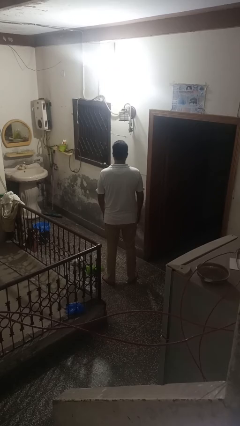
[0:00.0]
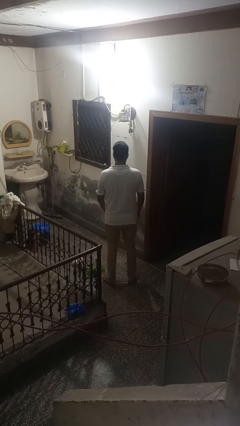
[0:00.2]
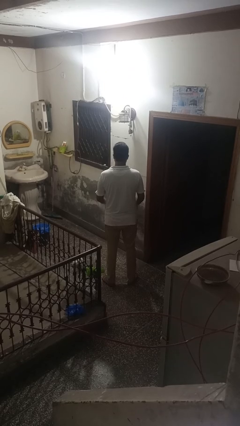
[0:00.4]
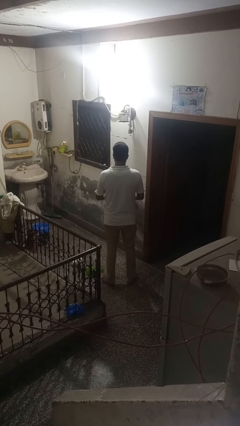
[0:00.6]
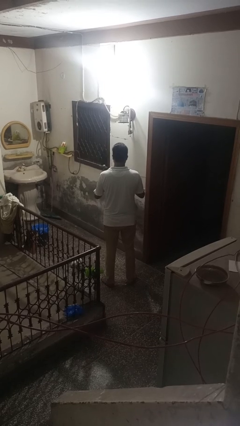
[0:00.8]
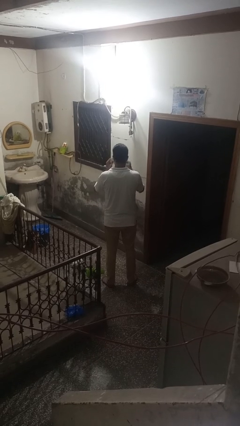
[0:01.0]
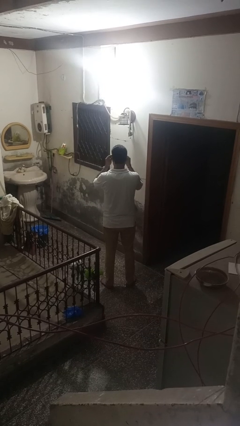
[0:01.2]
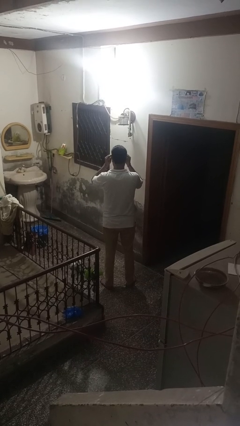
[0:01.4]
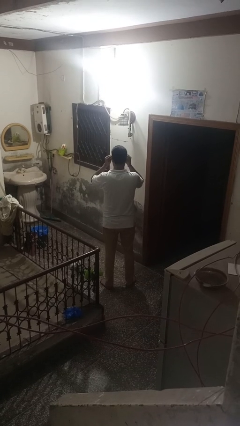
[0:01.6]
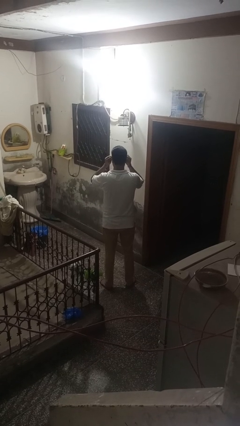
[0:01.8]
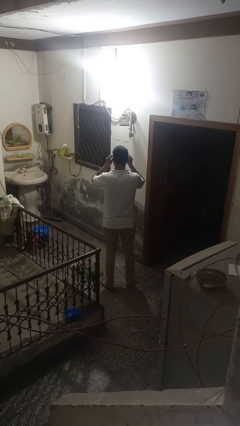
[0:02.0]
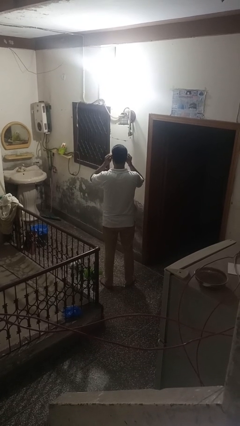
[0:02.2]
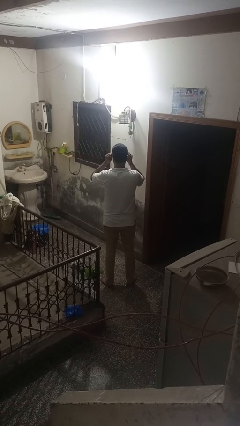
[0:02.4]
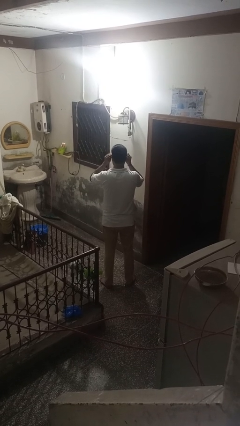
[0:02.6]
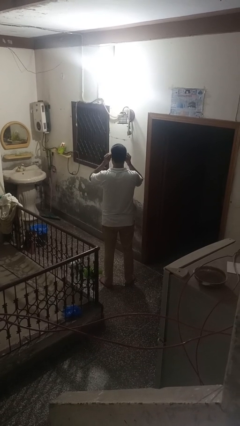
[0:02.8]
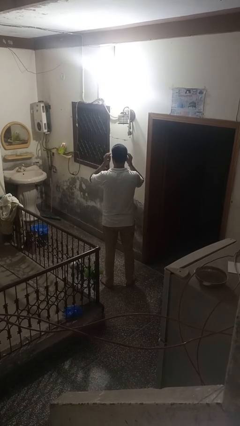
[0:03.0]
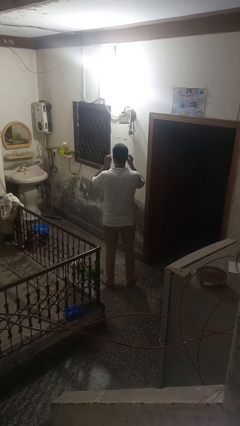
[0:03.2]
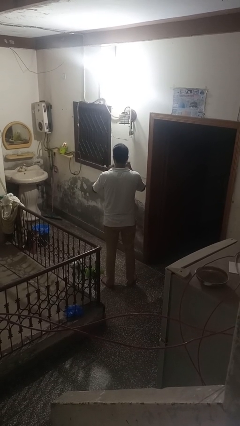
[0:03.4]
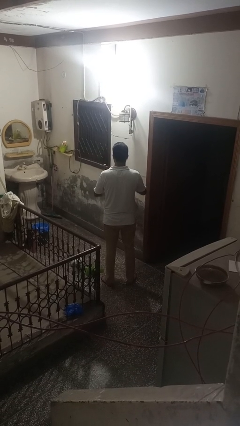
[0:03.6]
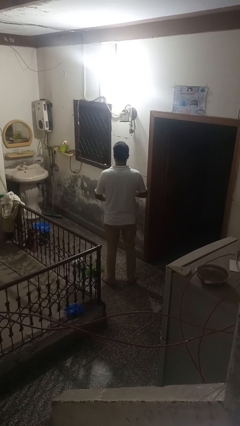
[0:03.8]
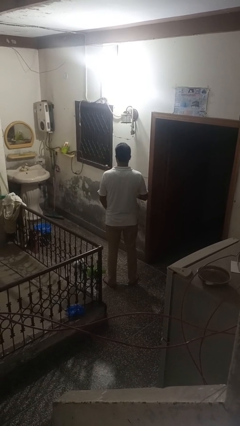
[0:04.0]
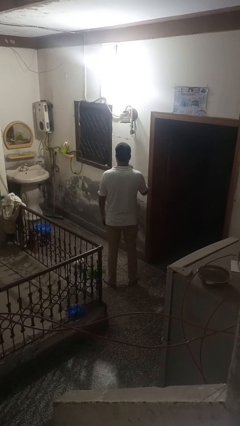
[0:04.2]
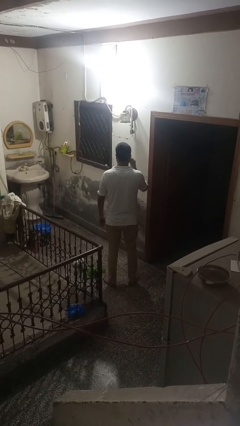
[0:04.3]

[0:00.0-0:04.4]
person puts on sunglasses

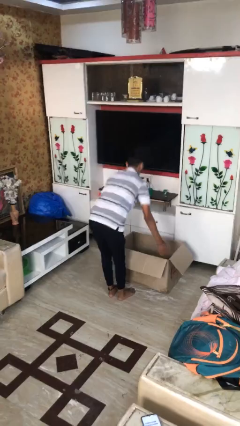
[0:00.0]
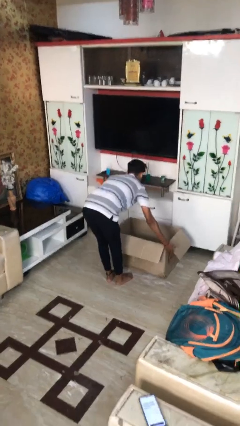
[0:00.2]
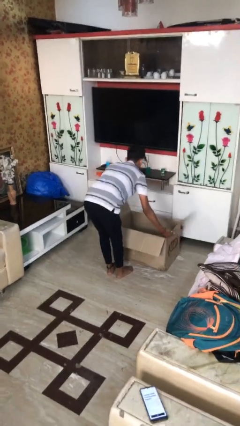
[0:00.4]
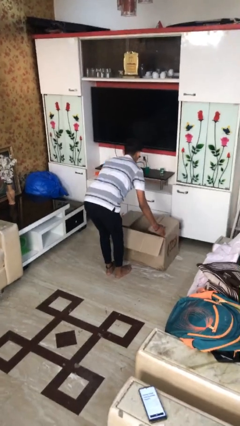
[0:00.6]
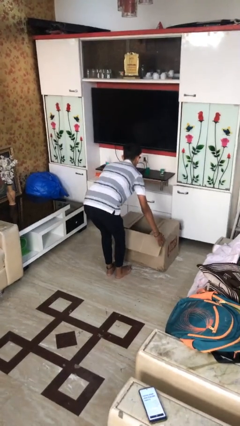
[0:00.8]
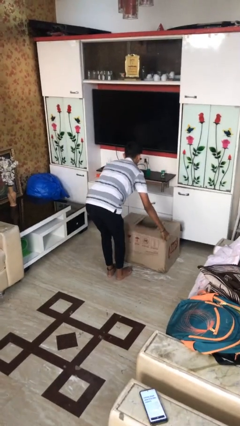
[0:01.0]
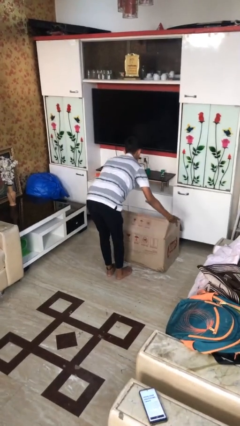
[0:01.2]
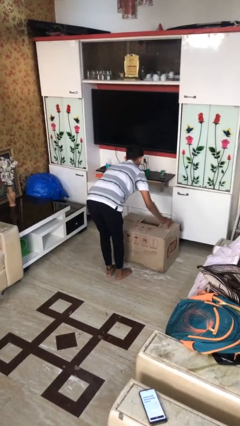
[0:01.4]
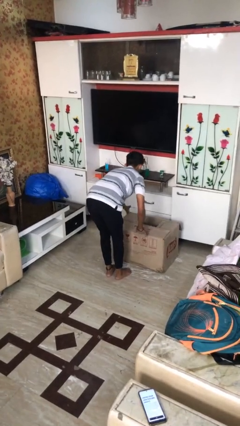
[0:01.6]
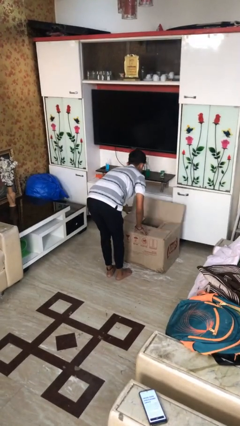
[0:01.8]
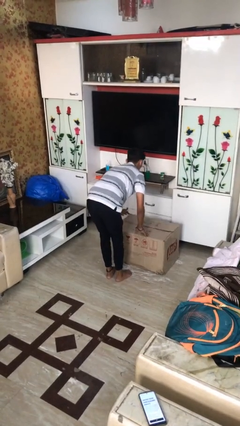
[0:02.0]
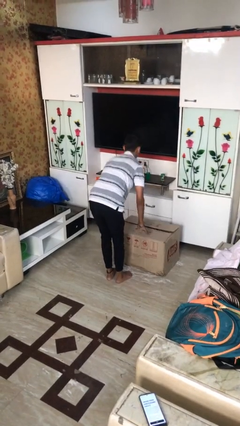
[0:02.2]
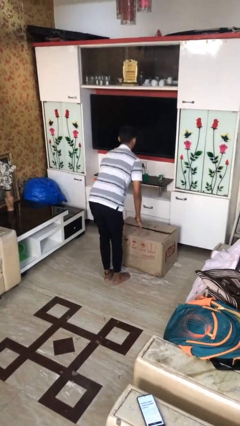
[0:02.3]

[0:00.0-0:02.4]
person closes box

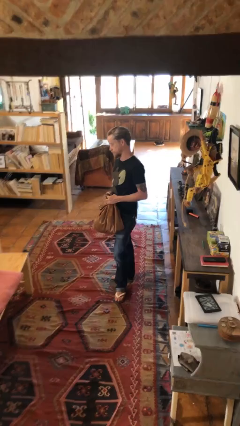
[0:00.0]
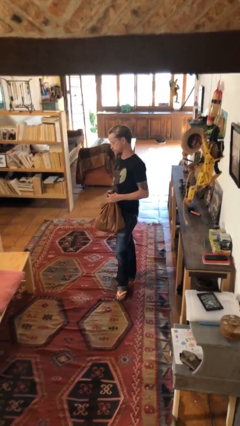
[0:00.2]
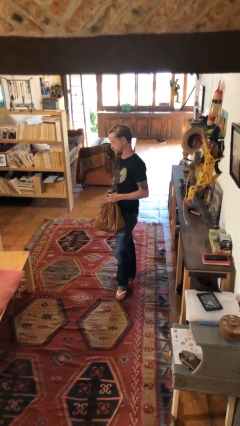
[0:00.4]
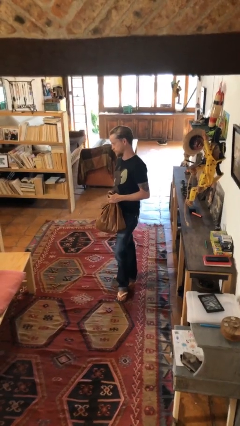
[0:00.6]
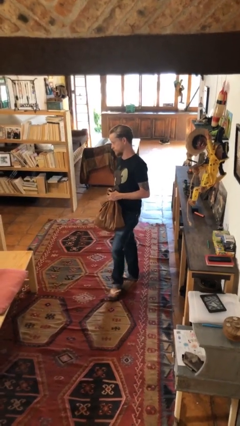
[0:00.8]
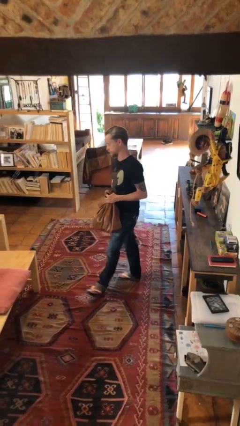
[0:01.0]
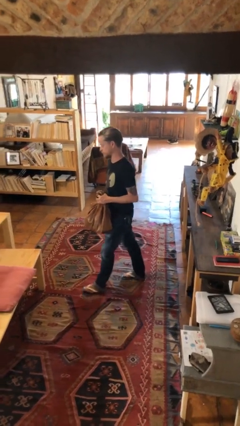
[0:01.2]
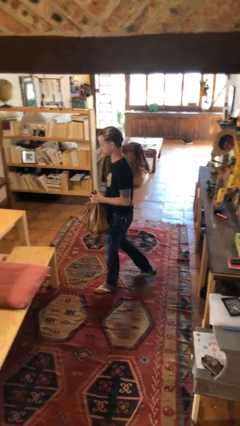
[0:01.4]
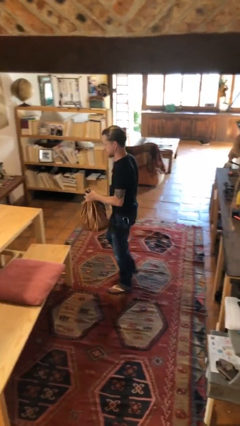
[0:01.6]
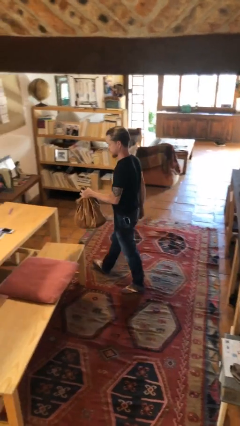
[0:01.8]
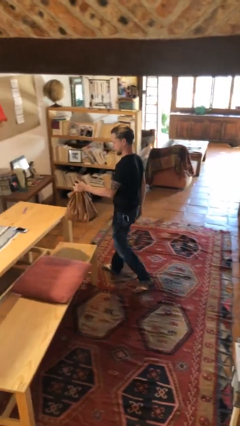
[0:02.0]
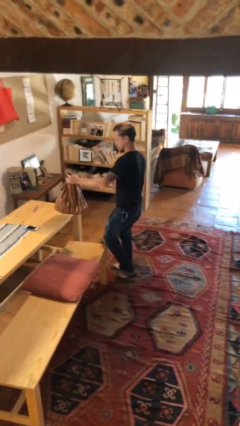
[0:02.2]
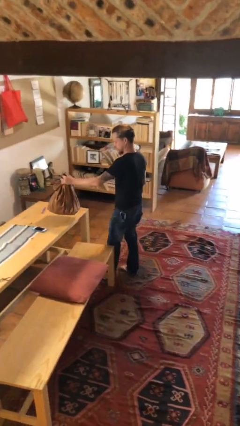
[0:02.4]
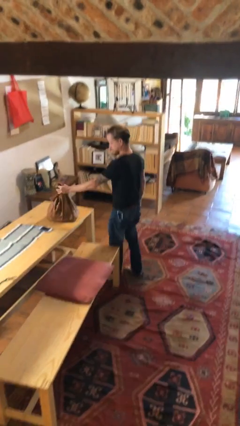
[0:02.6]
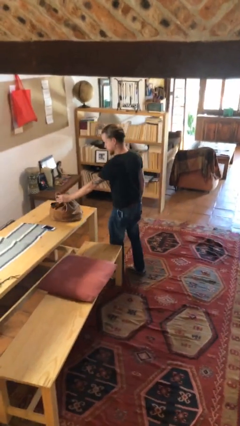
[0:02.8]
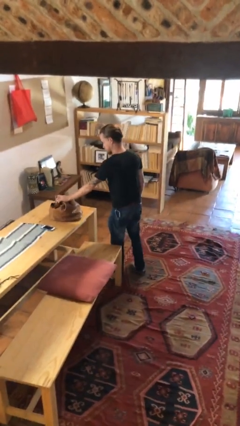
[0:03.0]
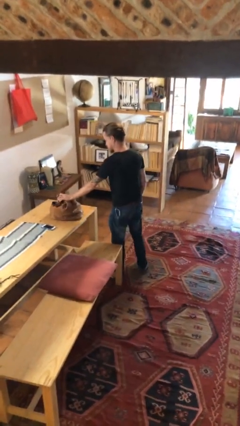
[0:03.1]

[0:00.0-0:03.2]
person puts down object on table

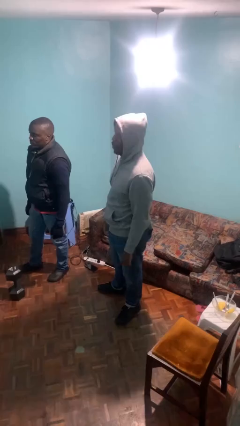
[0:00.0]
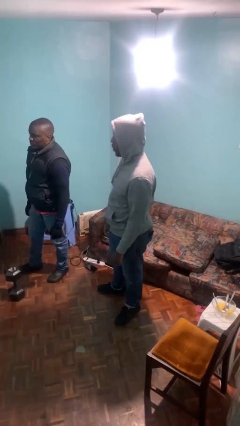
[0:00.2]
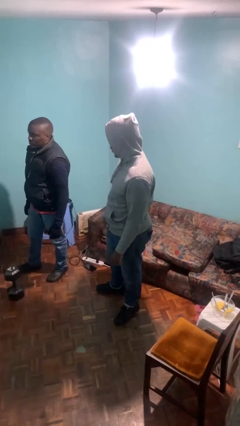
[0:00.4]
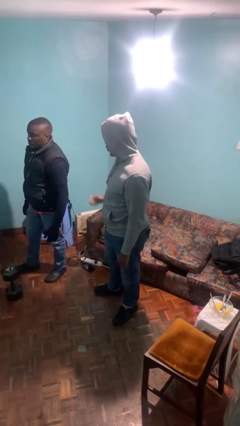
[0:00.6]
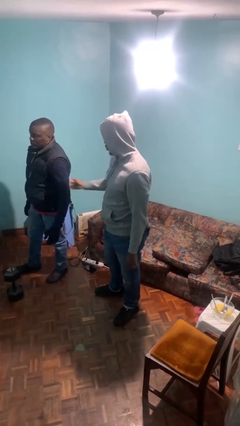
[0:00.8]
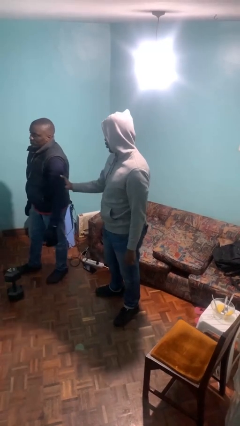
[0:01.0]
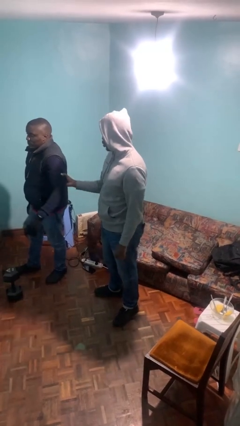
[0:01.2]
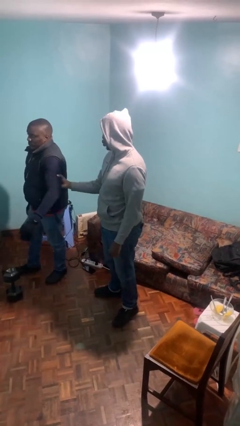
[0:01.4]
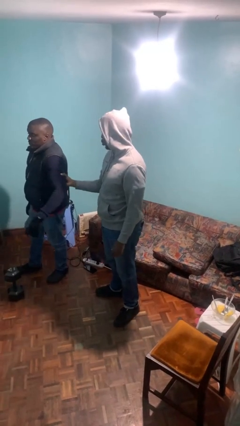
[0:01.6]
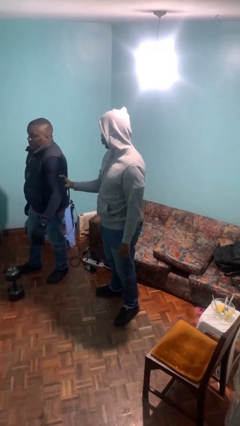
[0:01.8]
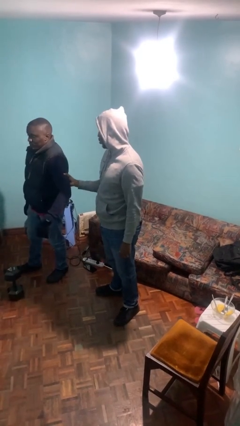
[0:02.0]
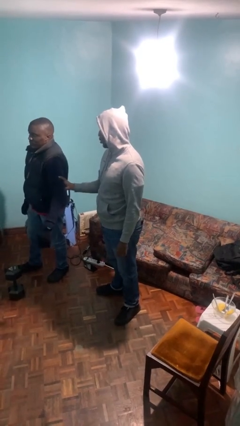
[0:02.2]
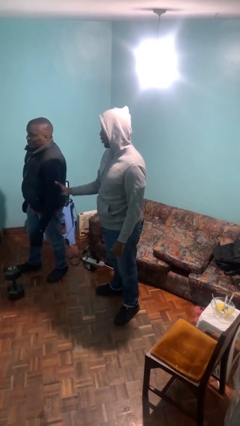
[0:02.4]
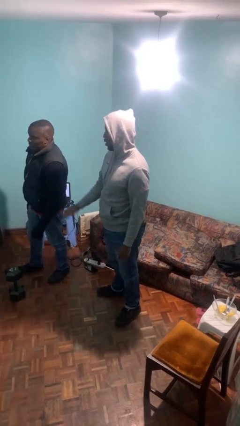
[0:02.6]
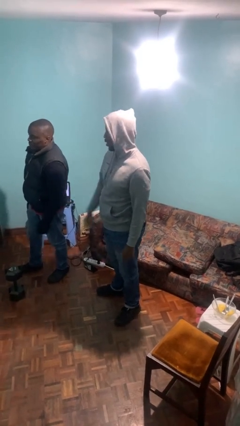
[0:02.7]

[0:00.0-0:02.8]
person grabs person by bicep

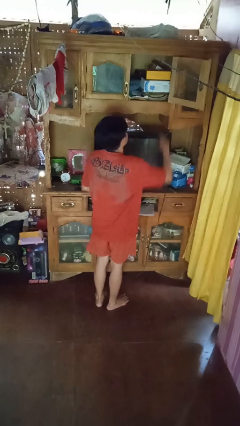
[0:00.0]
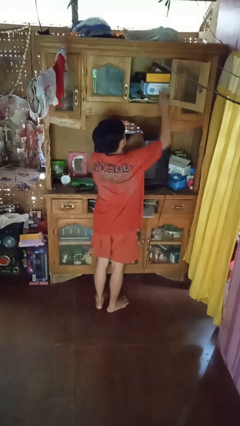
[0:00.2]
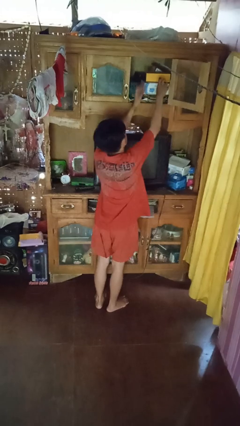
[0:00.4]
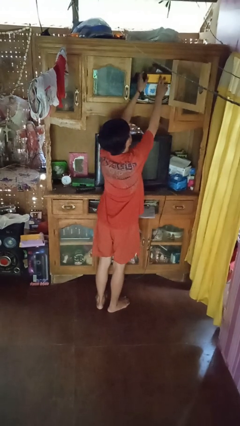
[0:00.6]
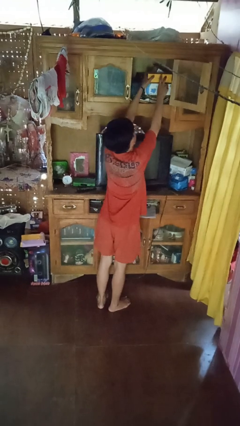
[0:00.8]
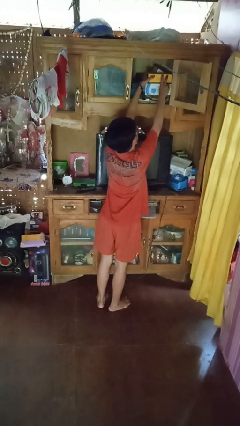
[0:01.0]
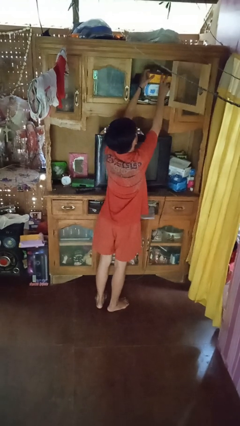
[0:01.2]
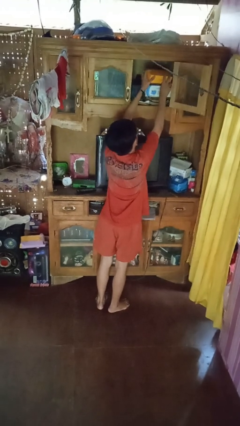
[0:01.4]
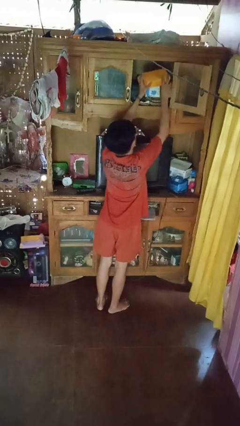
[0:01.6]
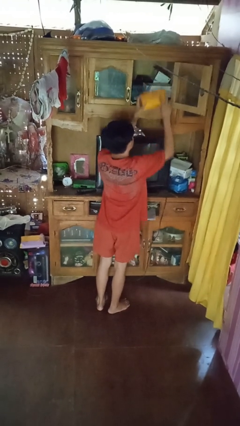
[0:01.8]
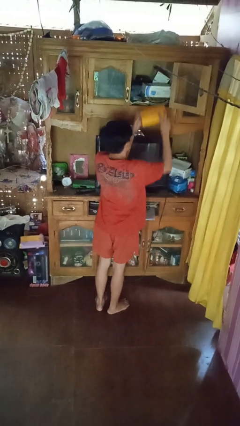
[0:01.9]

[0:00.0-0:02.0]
person picks up object from shelf

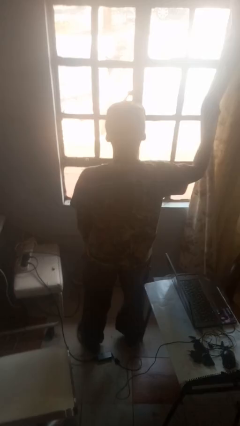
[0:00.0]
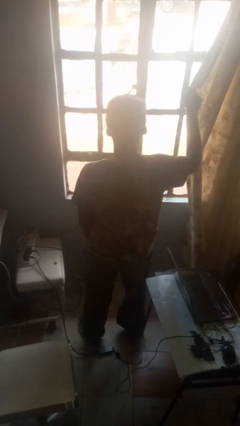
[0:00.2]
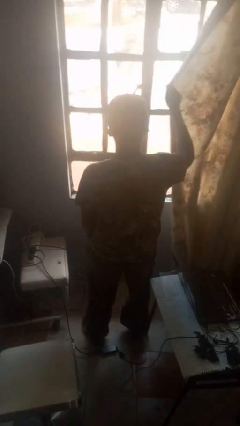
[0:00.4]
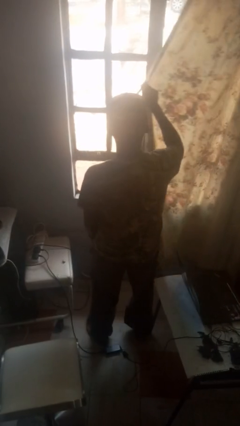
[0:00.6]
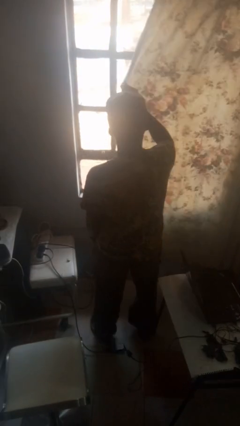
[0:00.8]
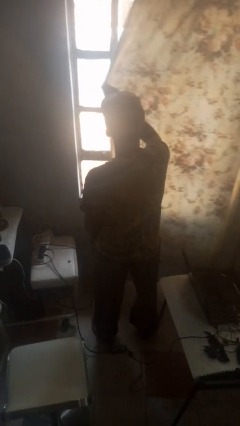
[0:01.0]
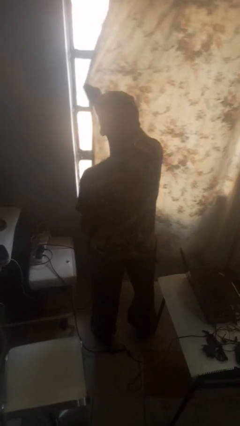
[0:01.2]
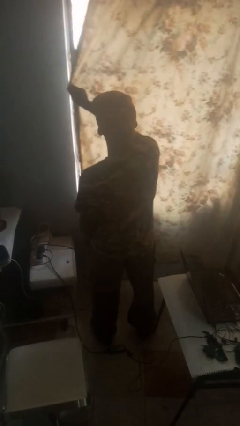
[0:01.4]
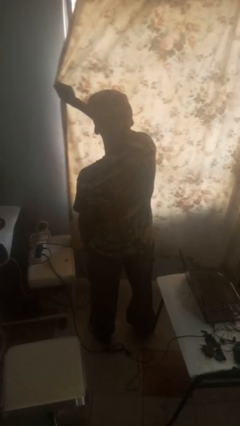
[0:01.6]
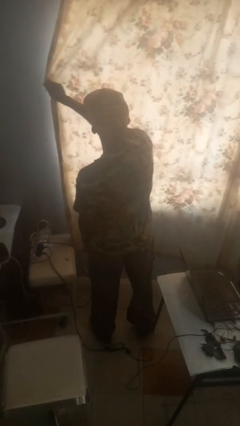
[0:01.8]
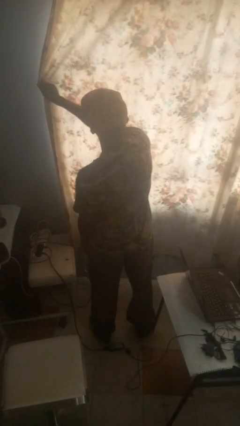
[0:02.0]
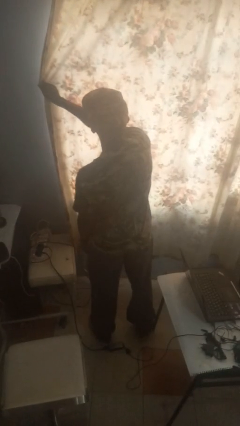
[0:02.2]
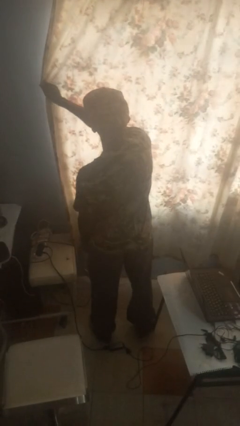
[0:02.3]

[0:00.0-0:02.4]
person closes curtains

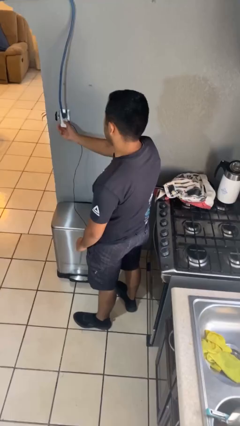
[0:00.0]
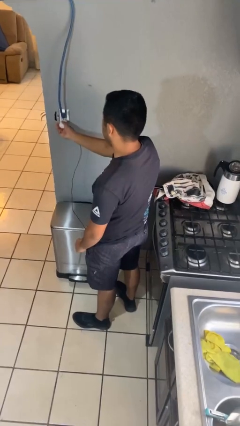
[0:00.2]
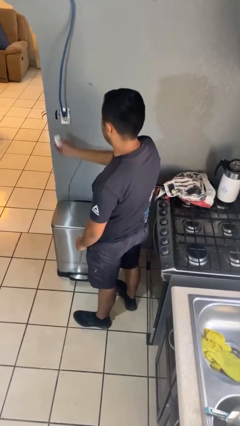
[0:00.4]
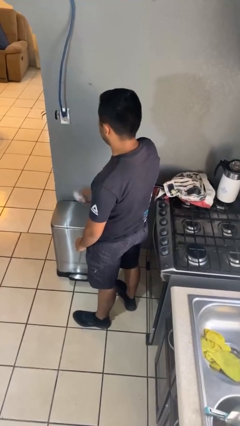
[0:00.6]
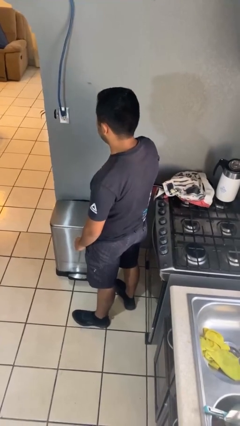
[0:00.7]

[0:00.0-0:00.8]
person unplugs from electrical socket
